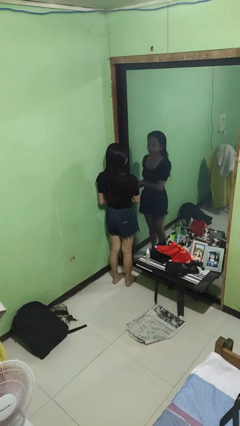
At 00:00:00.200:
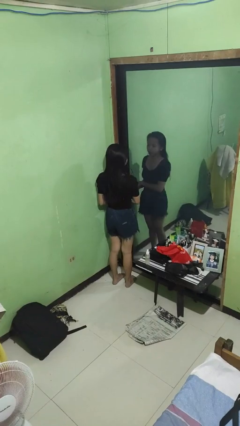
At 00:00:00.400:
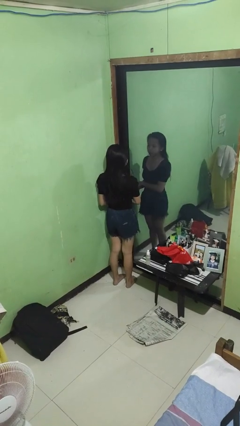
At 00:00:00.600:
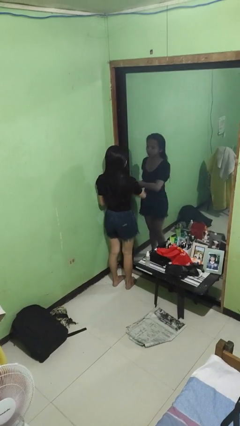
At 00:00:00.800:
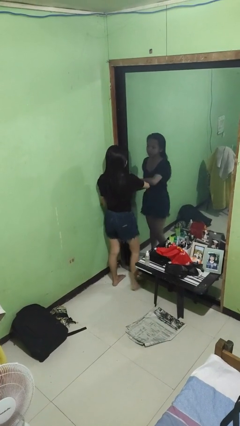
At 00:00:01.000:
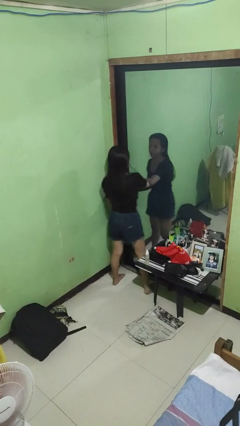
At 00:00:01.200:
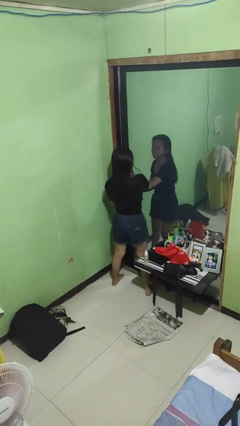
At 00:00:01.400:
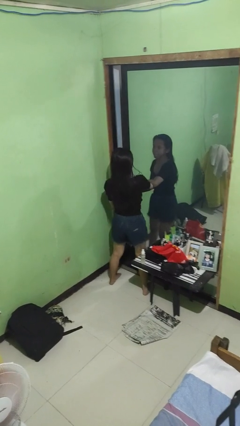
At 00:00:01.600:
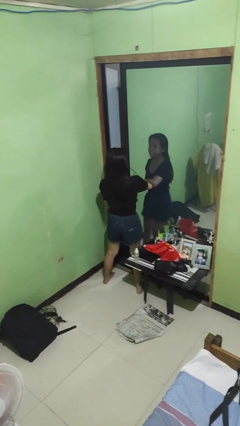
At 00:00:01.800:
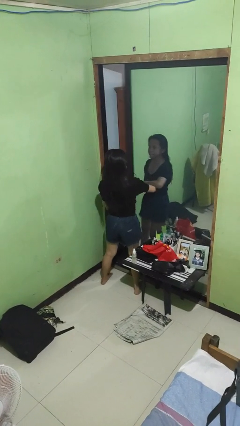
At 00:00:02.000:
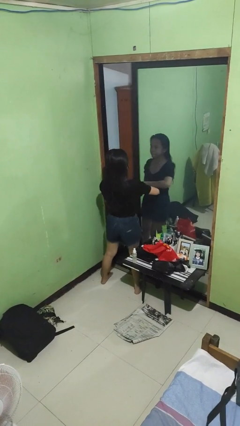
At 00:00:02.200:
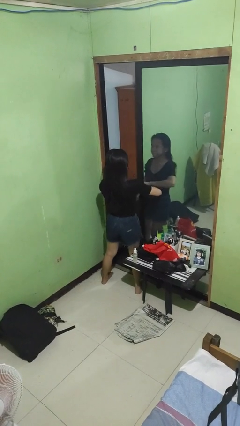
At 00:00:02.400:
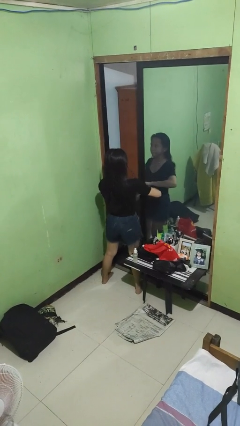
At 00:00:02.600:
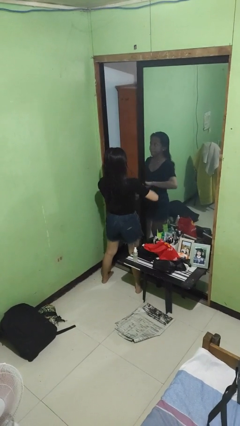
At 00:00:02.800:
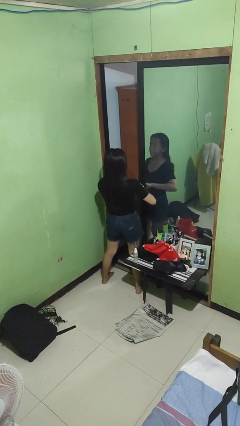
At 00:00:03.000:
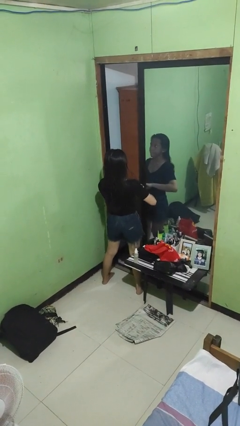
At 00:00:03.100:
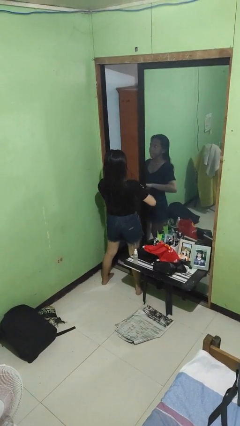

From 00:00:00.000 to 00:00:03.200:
person opens sliding door

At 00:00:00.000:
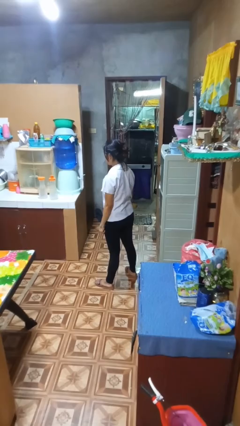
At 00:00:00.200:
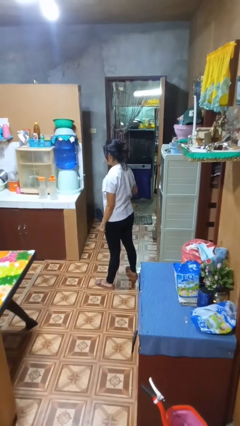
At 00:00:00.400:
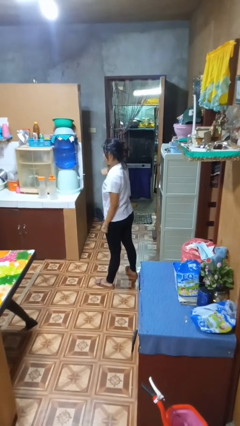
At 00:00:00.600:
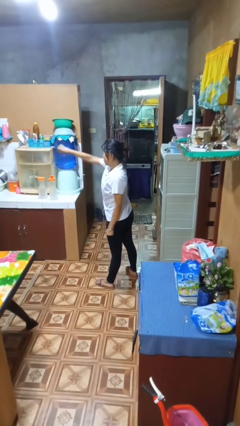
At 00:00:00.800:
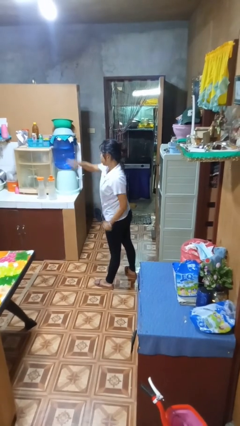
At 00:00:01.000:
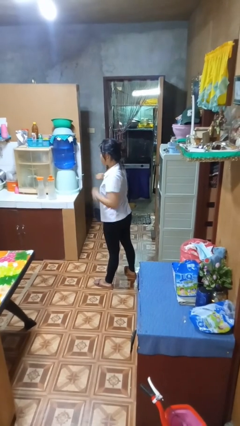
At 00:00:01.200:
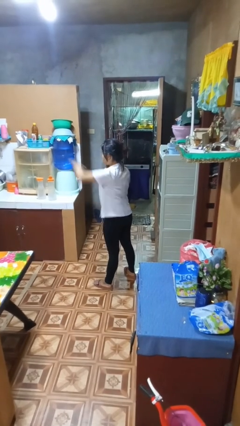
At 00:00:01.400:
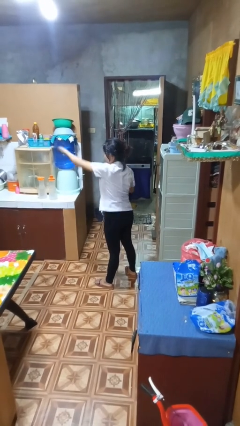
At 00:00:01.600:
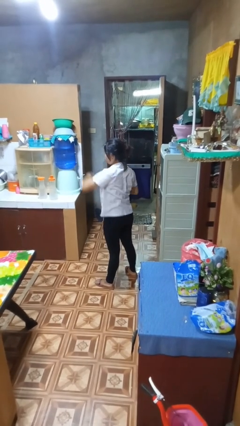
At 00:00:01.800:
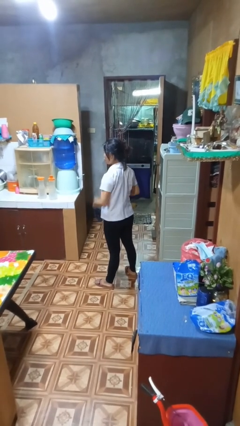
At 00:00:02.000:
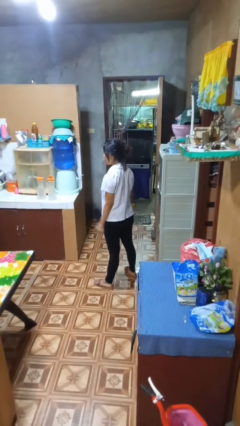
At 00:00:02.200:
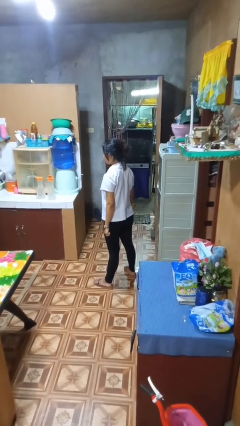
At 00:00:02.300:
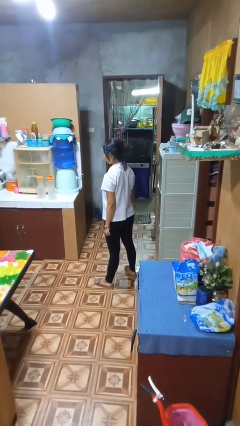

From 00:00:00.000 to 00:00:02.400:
person punches

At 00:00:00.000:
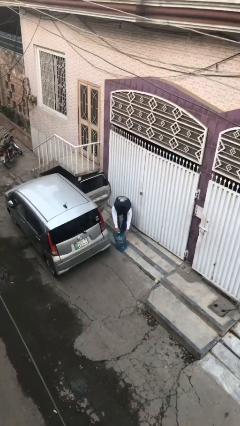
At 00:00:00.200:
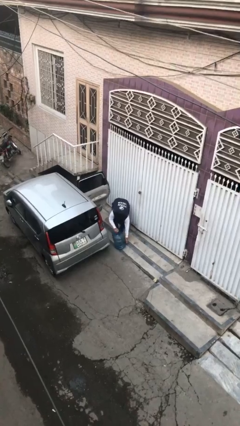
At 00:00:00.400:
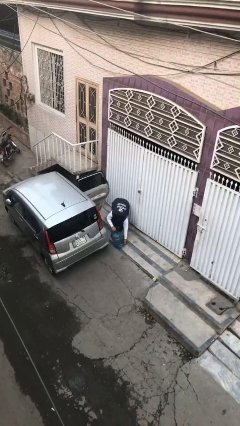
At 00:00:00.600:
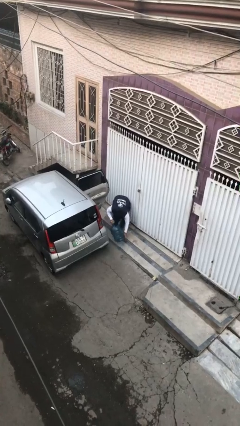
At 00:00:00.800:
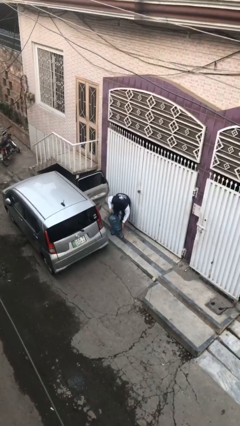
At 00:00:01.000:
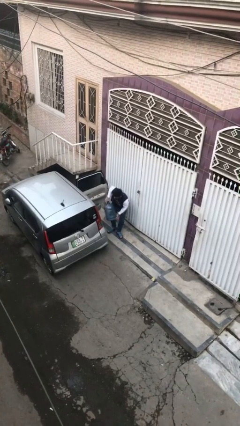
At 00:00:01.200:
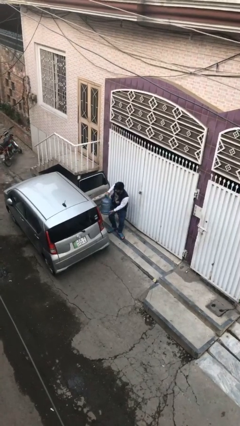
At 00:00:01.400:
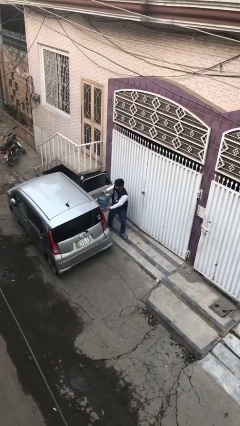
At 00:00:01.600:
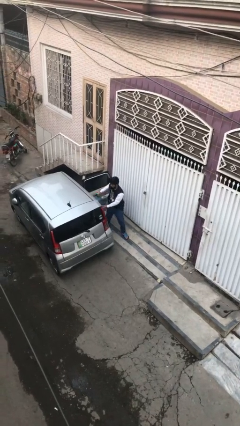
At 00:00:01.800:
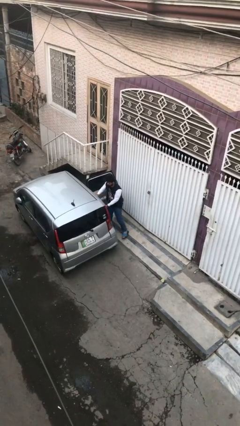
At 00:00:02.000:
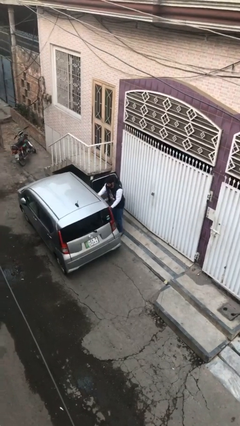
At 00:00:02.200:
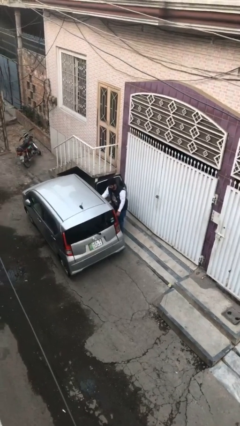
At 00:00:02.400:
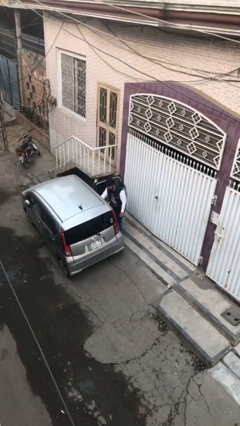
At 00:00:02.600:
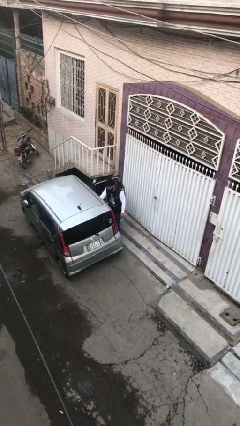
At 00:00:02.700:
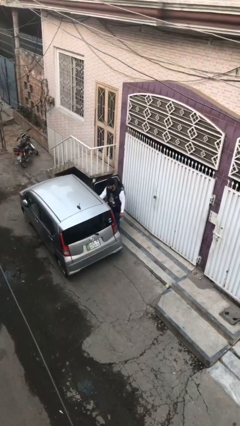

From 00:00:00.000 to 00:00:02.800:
person loads car

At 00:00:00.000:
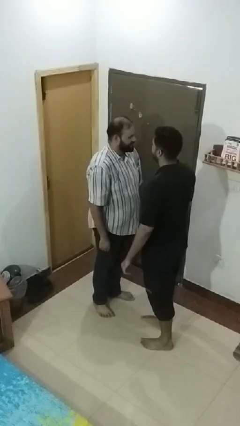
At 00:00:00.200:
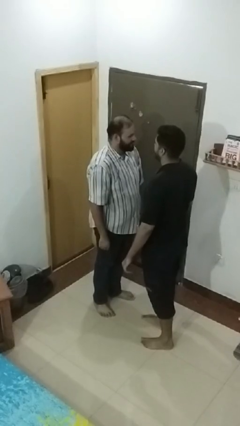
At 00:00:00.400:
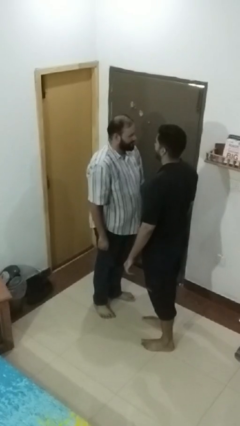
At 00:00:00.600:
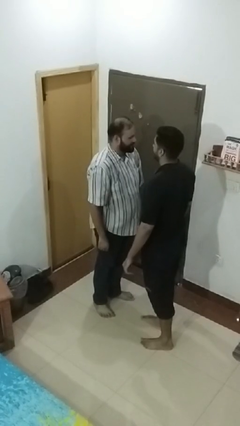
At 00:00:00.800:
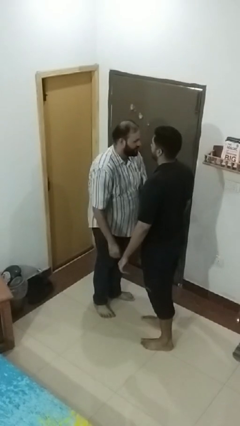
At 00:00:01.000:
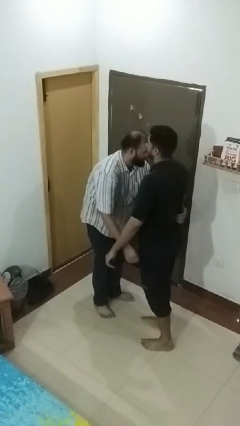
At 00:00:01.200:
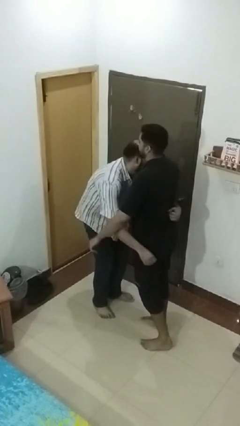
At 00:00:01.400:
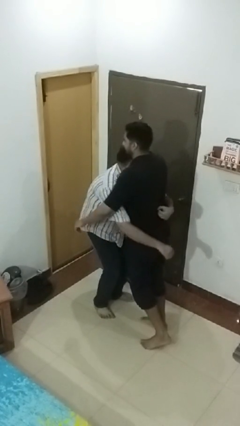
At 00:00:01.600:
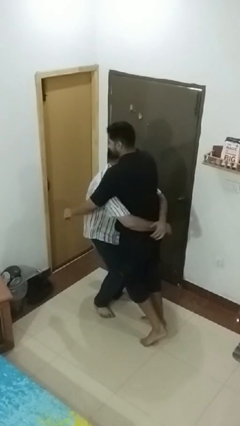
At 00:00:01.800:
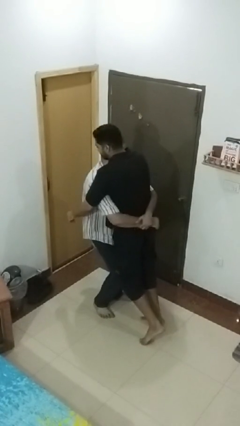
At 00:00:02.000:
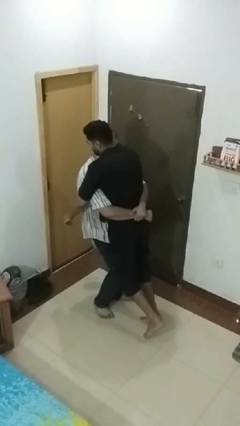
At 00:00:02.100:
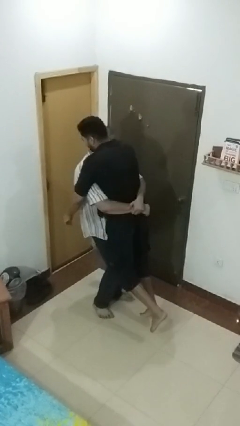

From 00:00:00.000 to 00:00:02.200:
person picks up person

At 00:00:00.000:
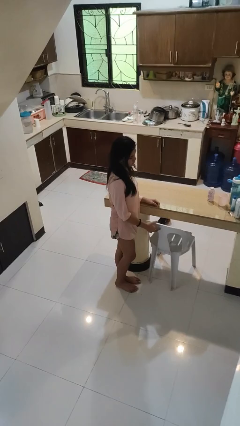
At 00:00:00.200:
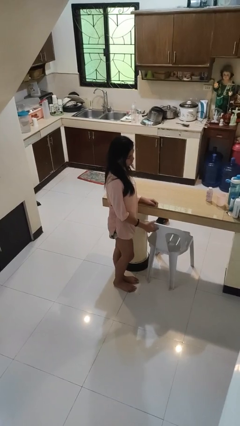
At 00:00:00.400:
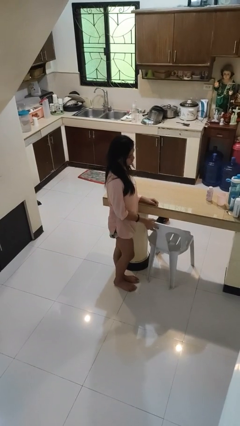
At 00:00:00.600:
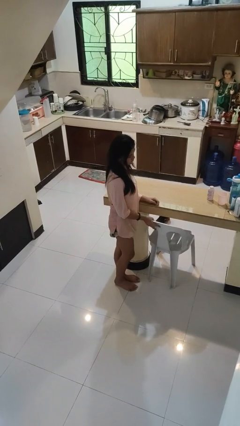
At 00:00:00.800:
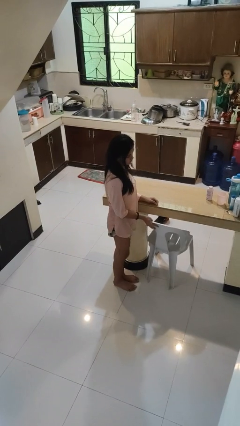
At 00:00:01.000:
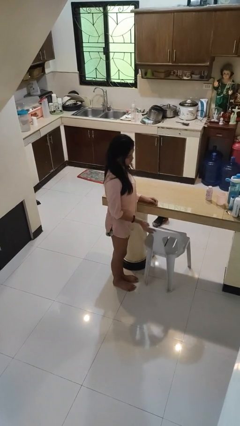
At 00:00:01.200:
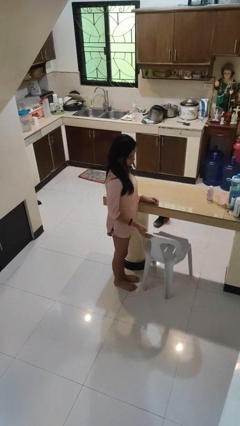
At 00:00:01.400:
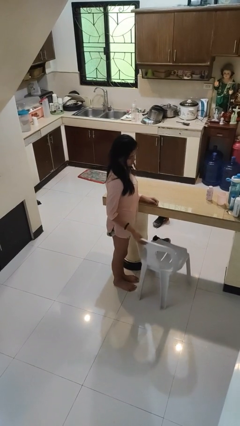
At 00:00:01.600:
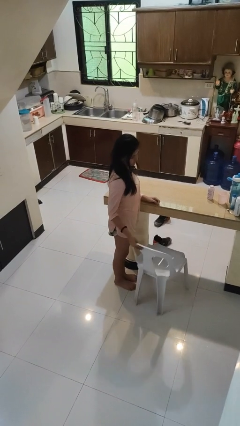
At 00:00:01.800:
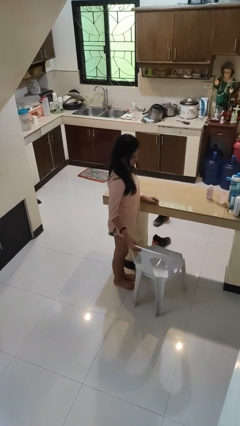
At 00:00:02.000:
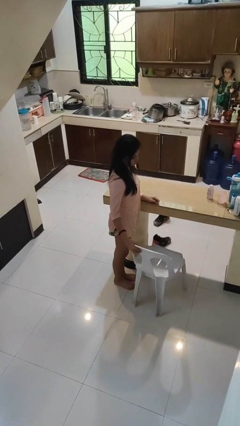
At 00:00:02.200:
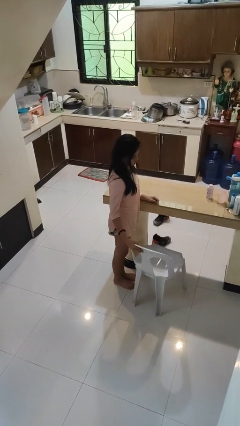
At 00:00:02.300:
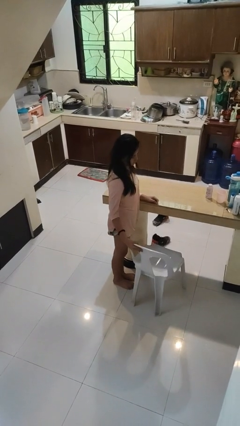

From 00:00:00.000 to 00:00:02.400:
person pulls out chair

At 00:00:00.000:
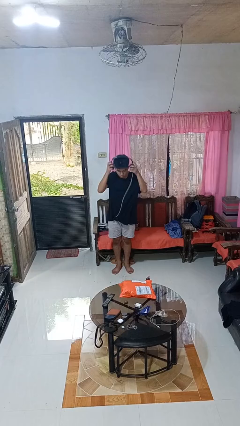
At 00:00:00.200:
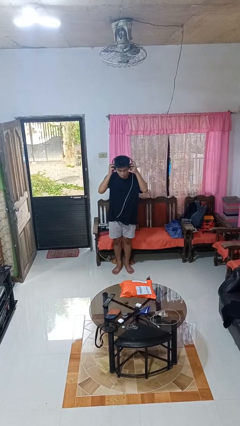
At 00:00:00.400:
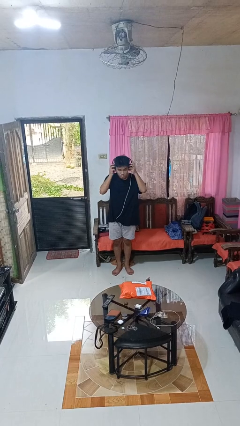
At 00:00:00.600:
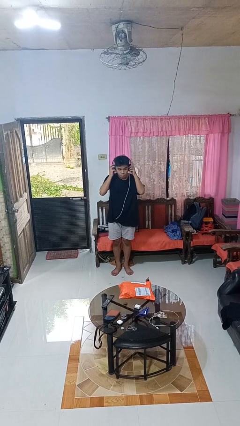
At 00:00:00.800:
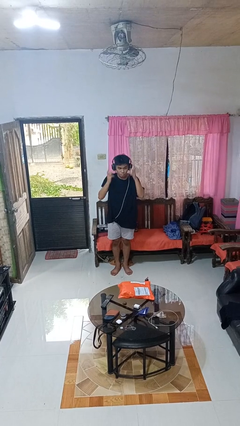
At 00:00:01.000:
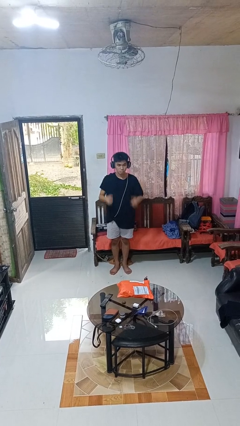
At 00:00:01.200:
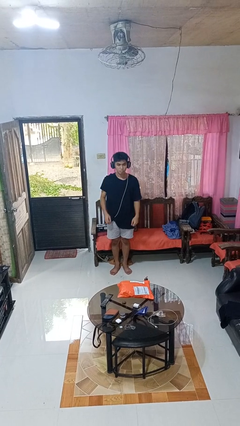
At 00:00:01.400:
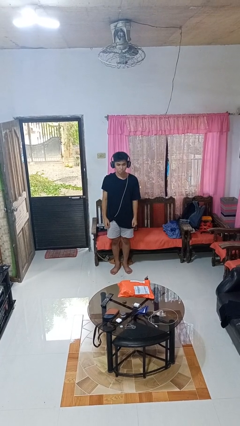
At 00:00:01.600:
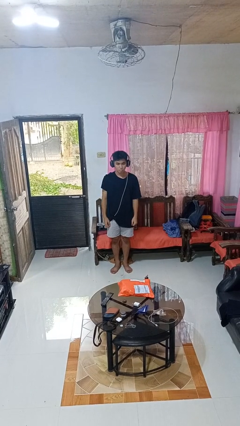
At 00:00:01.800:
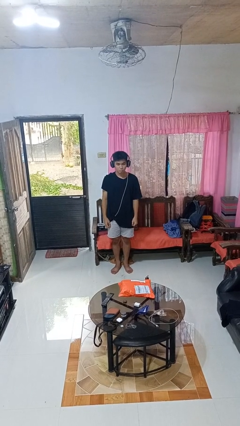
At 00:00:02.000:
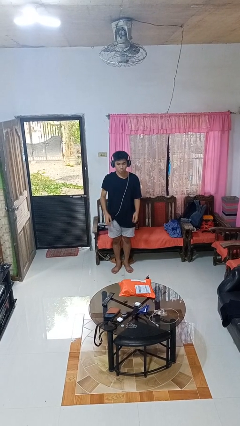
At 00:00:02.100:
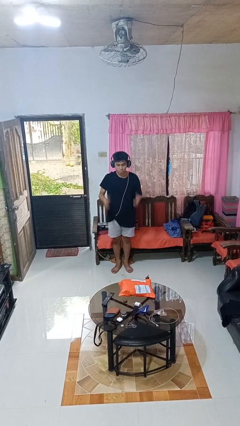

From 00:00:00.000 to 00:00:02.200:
person puts on headphones

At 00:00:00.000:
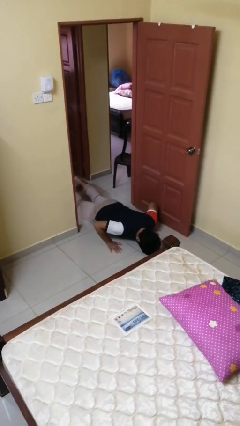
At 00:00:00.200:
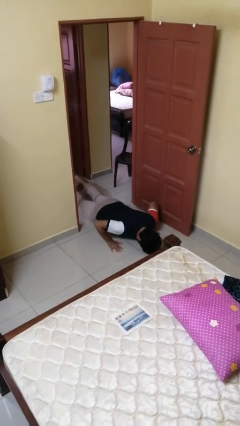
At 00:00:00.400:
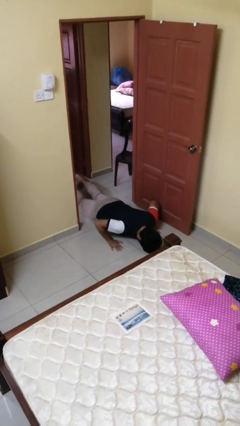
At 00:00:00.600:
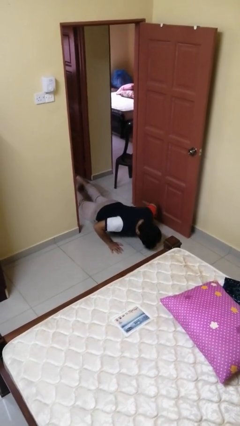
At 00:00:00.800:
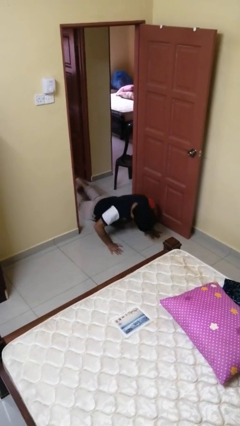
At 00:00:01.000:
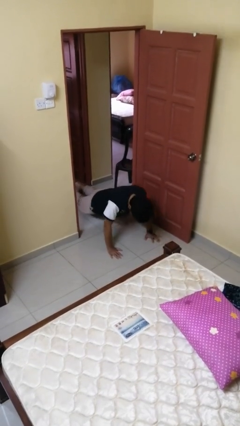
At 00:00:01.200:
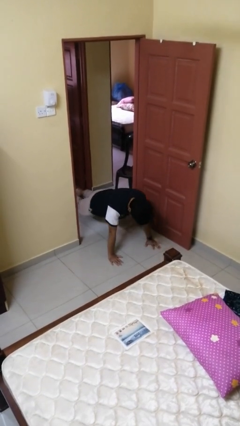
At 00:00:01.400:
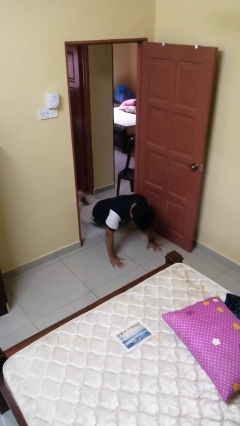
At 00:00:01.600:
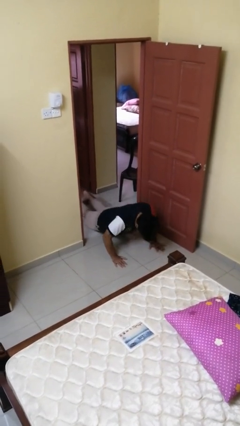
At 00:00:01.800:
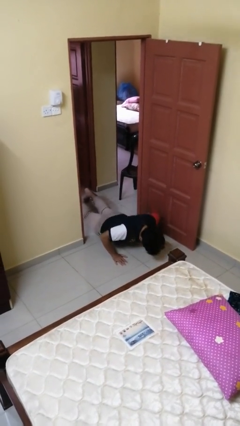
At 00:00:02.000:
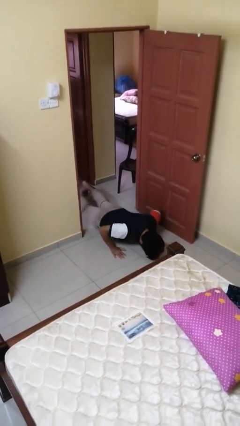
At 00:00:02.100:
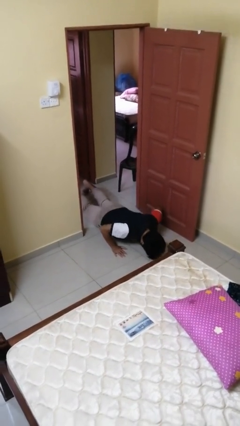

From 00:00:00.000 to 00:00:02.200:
person exercises with pushup
